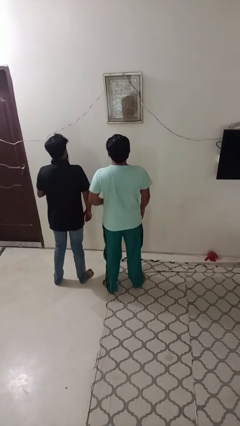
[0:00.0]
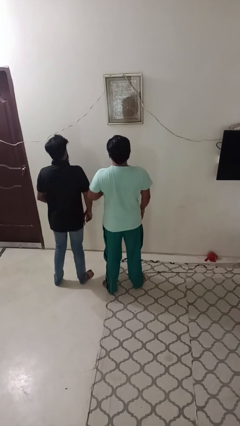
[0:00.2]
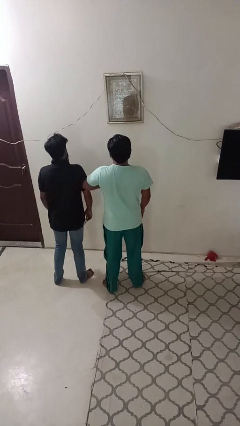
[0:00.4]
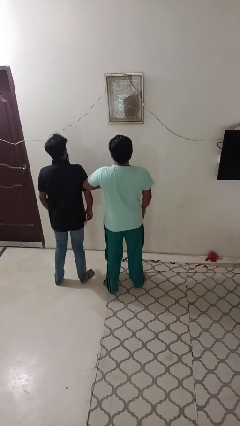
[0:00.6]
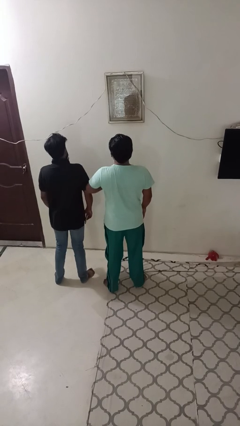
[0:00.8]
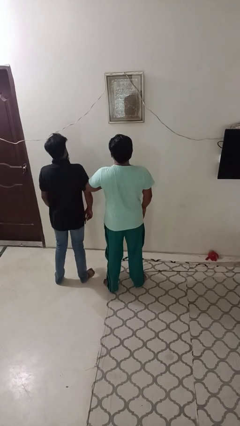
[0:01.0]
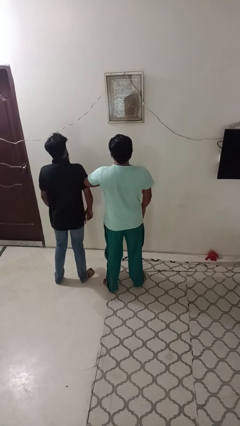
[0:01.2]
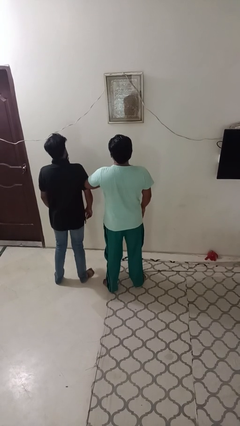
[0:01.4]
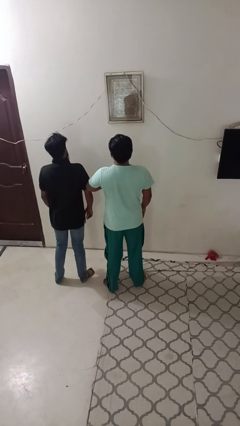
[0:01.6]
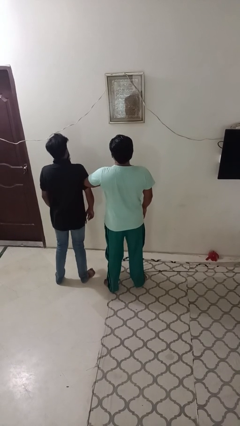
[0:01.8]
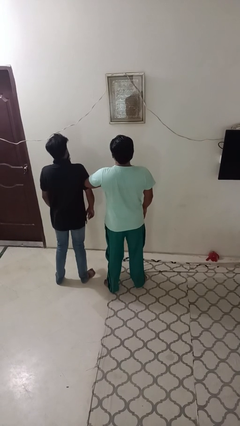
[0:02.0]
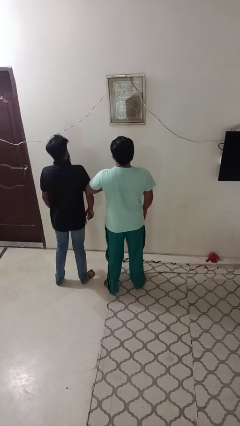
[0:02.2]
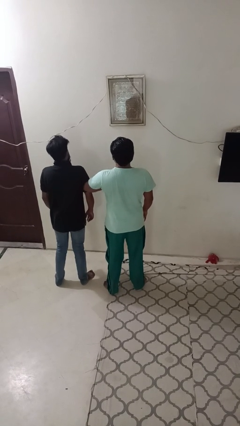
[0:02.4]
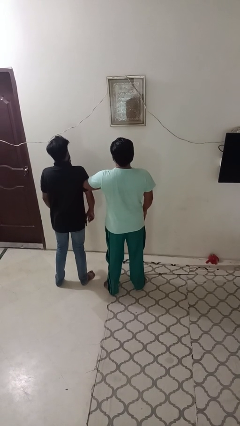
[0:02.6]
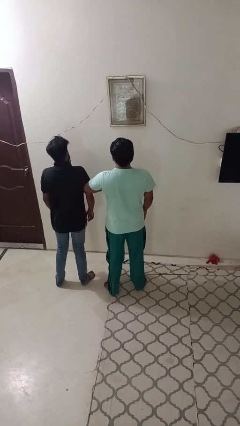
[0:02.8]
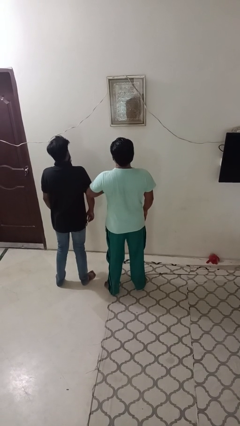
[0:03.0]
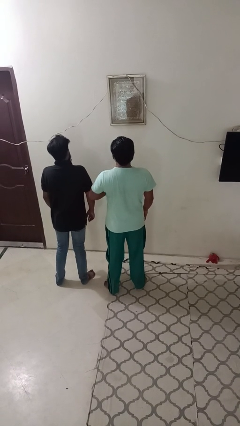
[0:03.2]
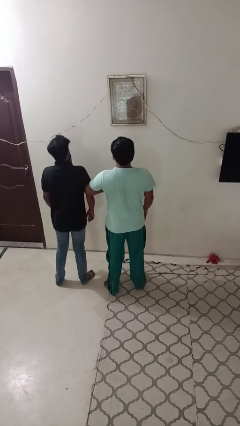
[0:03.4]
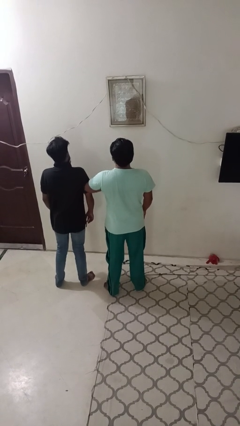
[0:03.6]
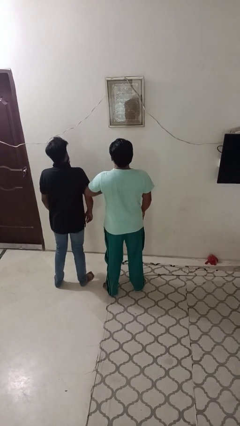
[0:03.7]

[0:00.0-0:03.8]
person nudges person with elbow

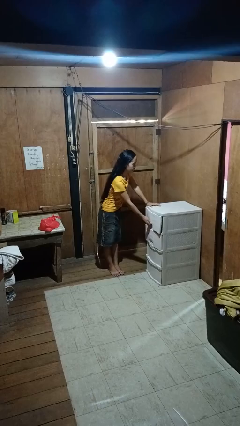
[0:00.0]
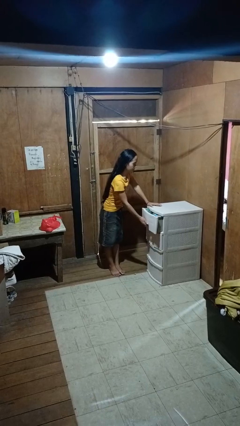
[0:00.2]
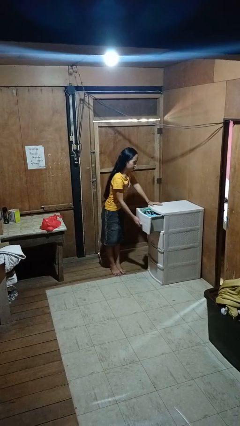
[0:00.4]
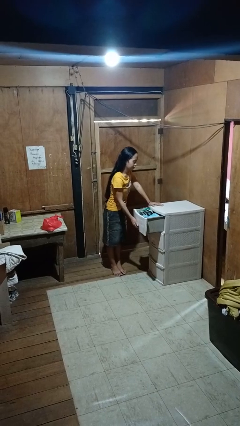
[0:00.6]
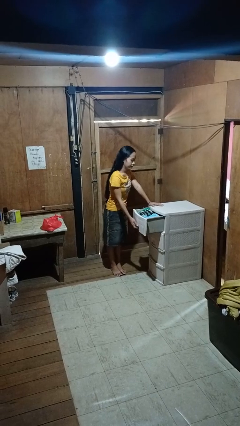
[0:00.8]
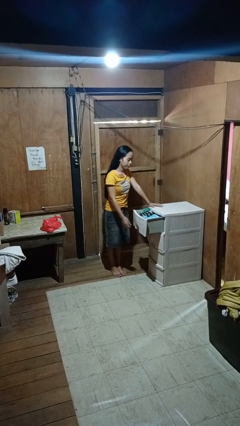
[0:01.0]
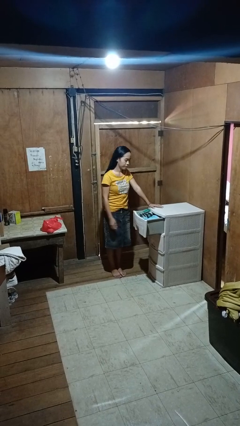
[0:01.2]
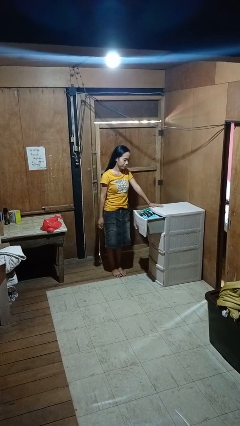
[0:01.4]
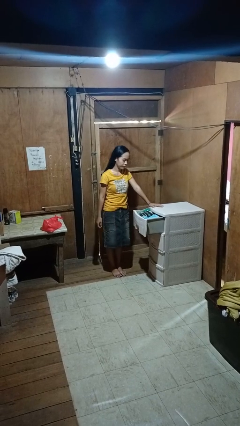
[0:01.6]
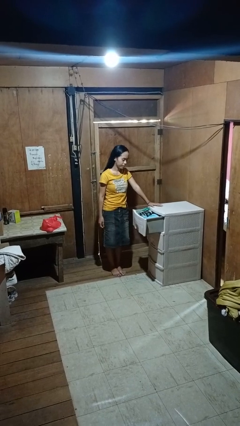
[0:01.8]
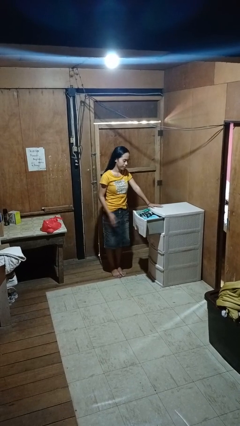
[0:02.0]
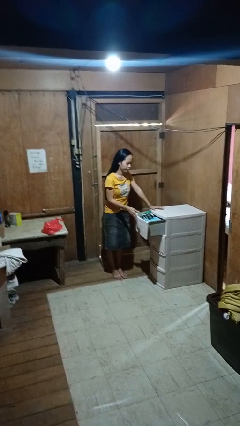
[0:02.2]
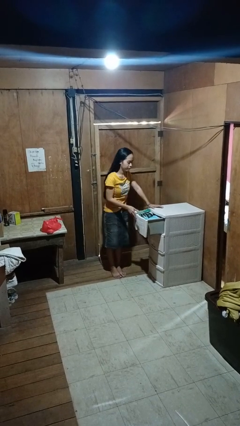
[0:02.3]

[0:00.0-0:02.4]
person opens dresser drawer

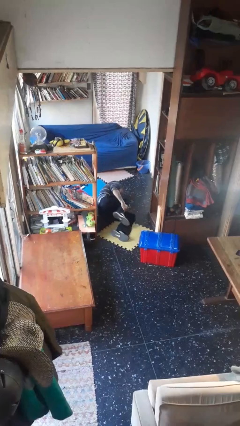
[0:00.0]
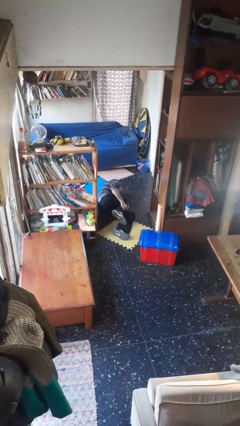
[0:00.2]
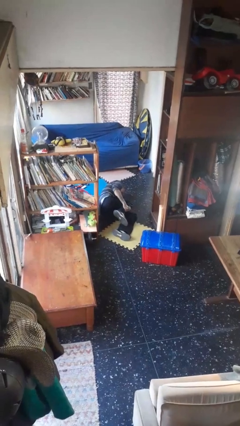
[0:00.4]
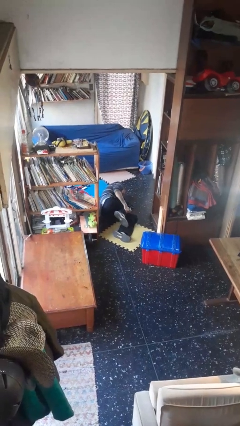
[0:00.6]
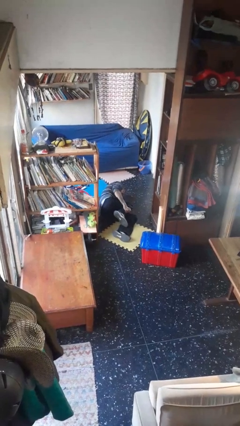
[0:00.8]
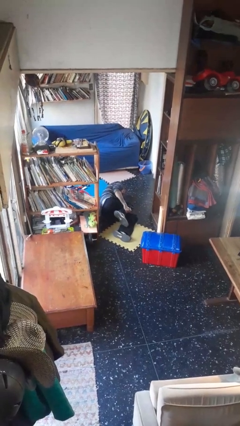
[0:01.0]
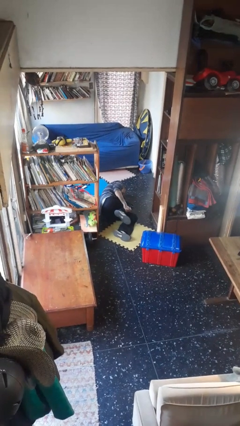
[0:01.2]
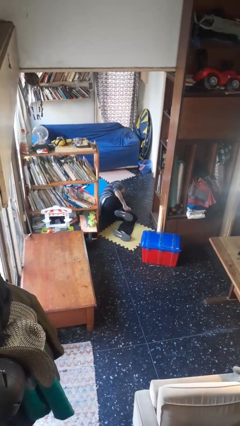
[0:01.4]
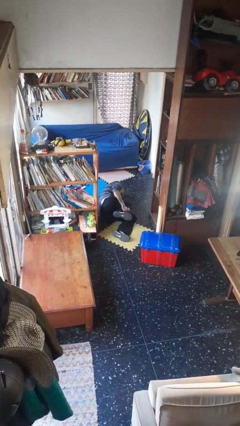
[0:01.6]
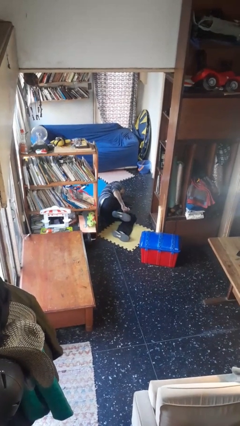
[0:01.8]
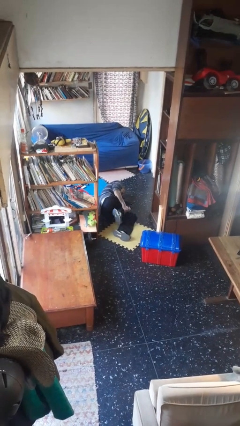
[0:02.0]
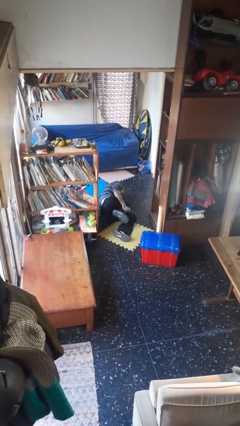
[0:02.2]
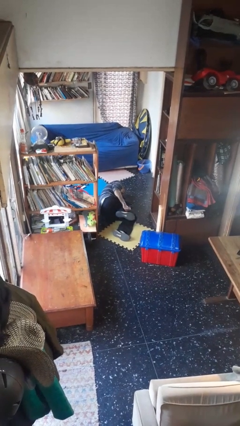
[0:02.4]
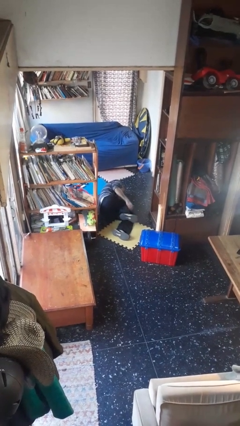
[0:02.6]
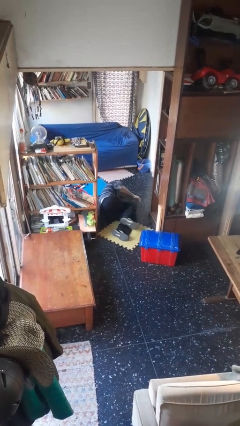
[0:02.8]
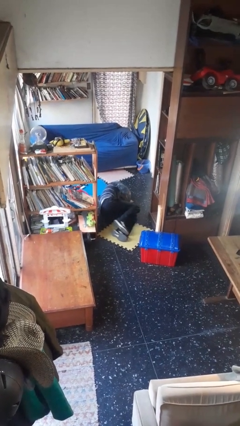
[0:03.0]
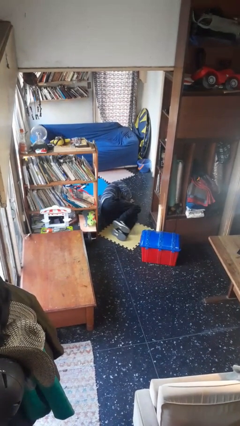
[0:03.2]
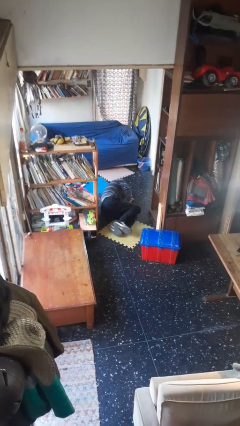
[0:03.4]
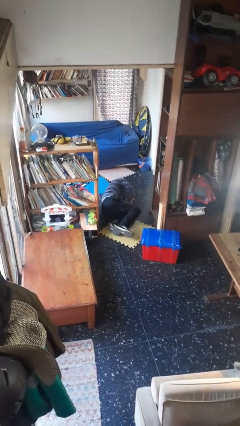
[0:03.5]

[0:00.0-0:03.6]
person lies down on floor

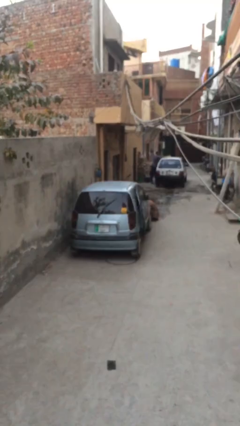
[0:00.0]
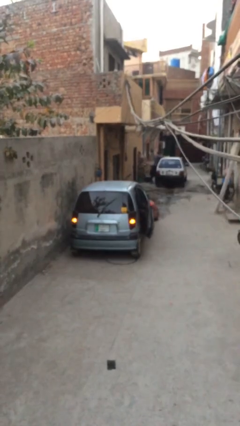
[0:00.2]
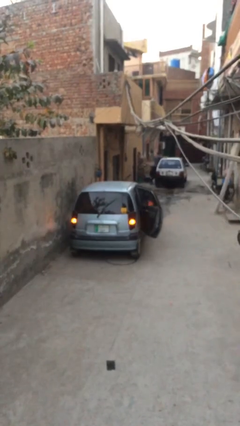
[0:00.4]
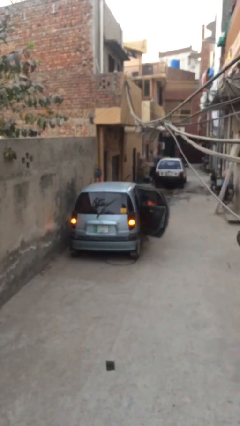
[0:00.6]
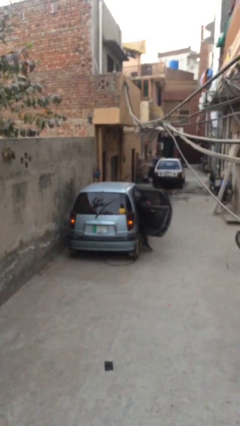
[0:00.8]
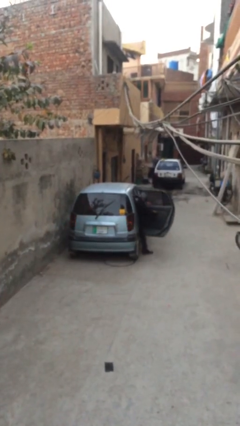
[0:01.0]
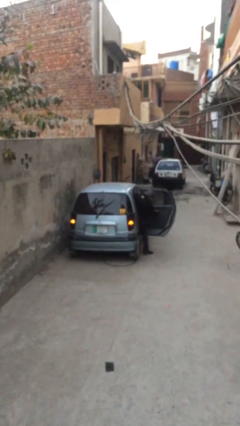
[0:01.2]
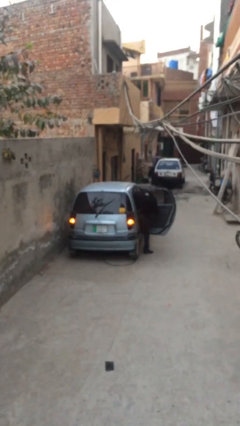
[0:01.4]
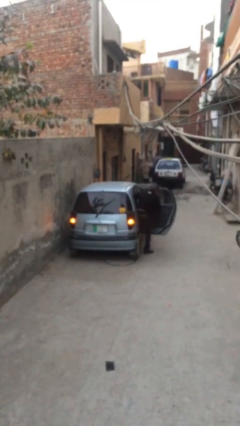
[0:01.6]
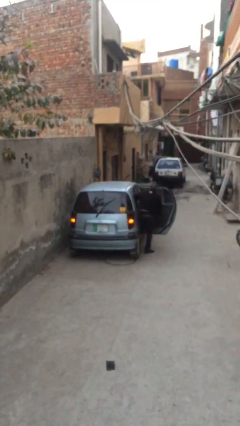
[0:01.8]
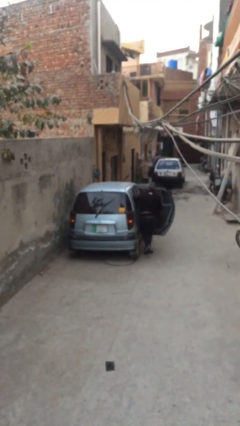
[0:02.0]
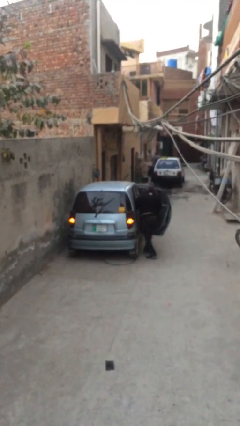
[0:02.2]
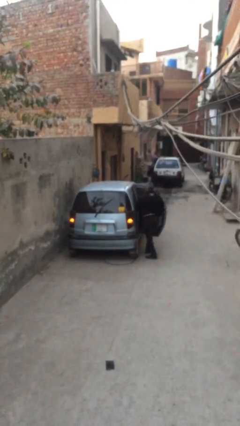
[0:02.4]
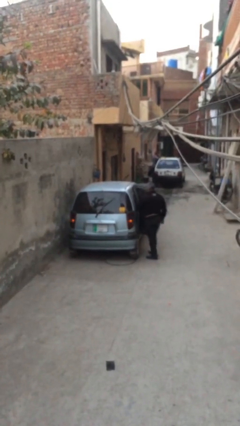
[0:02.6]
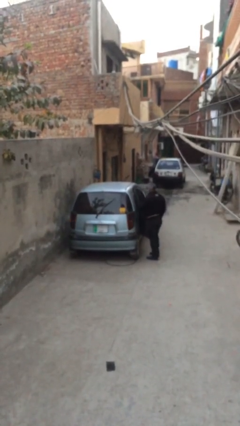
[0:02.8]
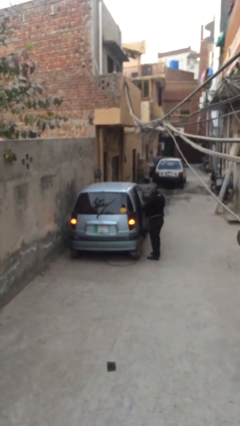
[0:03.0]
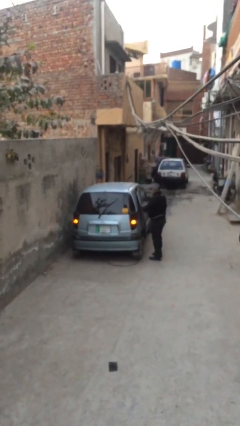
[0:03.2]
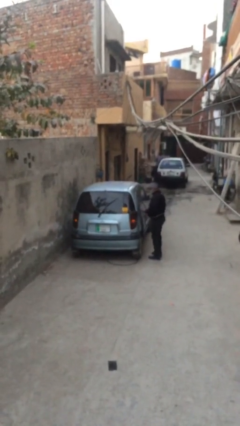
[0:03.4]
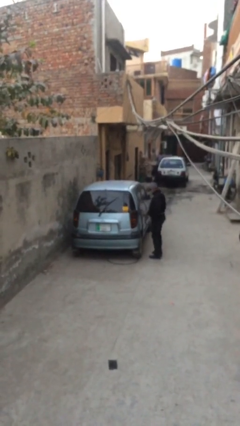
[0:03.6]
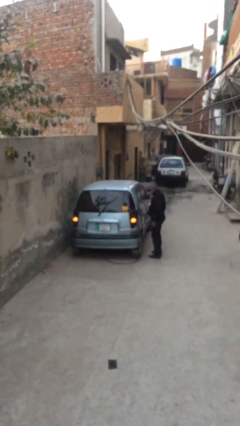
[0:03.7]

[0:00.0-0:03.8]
car drops off person

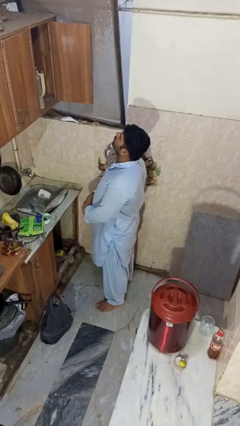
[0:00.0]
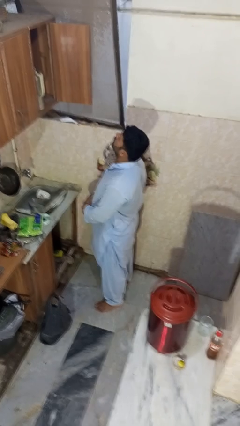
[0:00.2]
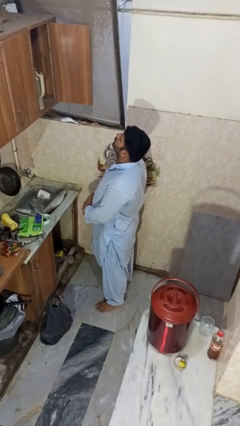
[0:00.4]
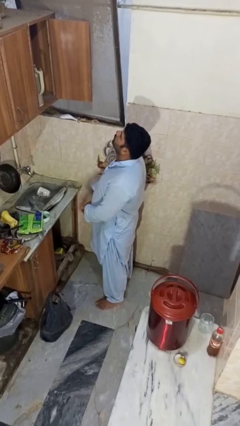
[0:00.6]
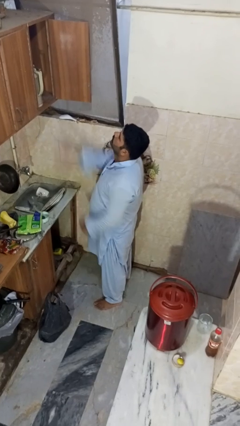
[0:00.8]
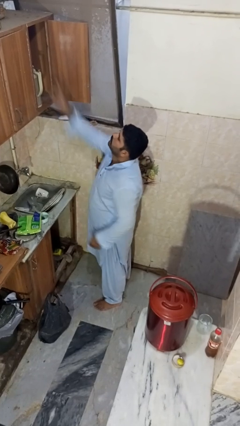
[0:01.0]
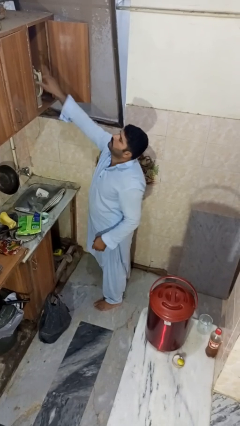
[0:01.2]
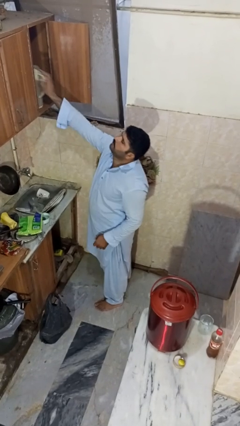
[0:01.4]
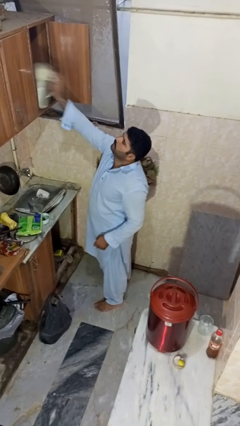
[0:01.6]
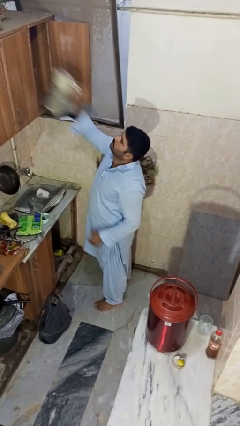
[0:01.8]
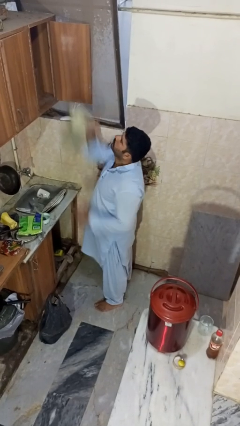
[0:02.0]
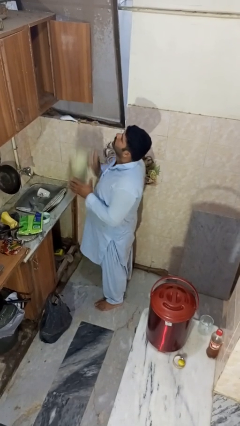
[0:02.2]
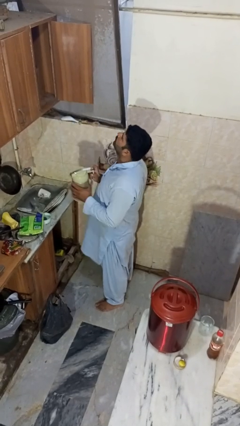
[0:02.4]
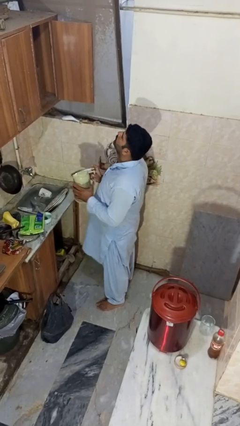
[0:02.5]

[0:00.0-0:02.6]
person takes object from cabinet

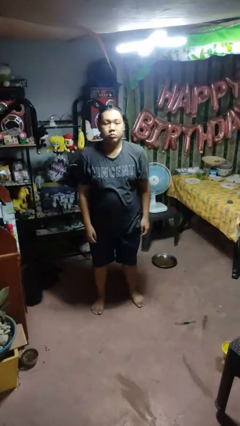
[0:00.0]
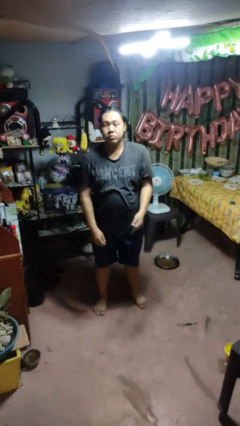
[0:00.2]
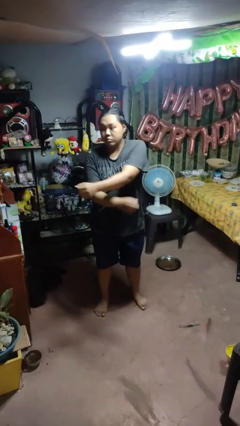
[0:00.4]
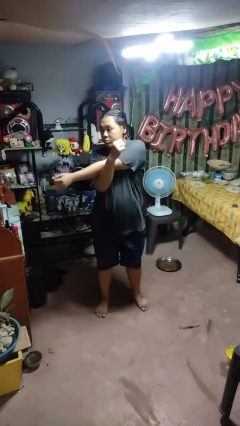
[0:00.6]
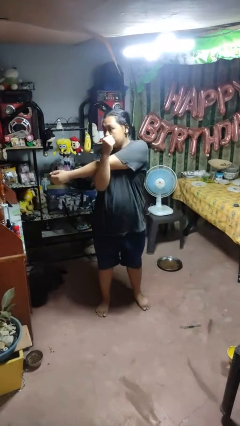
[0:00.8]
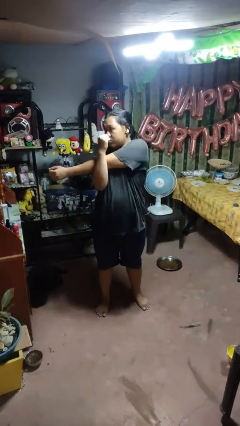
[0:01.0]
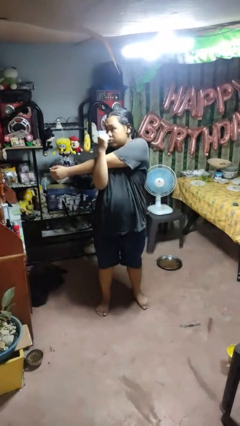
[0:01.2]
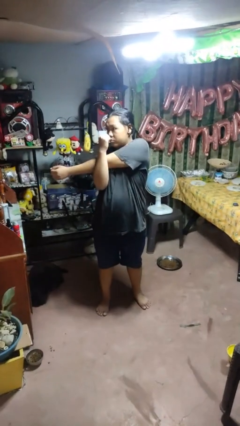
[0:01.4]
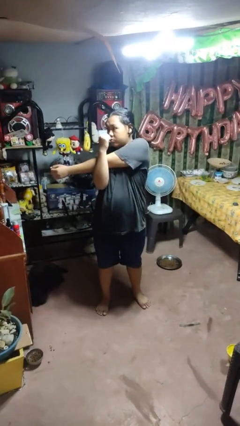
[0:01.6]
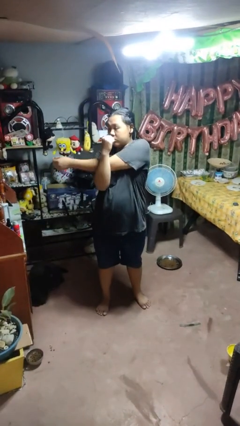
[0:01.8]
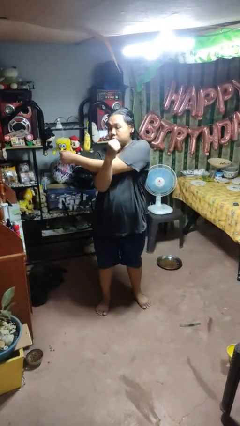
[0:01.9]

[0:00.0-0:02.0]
person crosses arms
